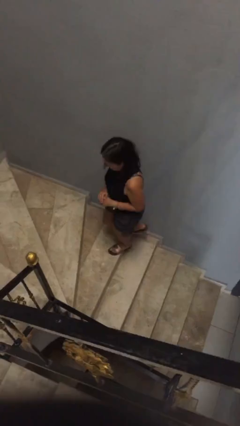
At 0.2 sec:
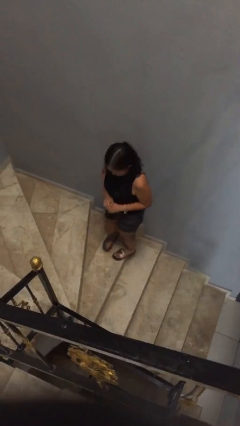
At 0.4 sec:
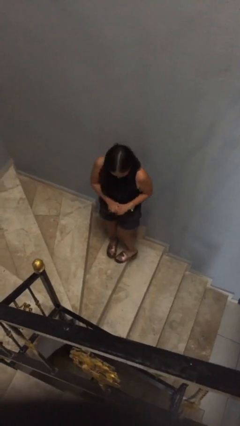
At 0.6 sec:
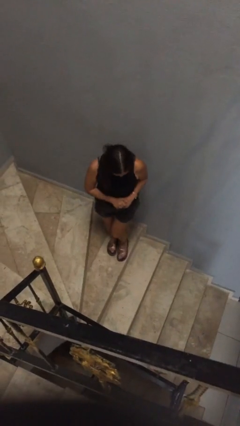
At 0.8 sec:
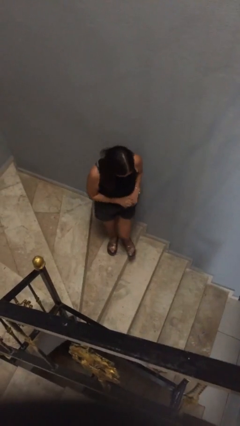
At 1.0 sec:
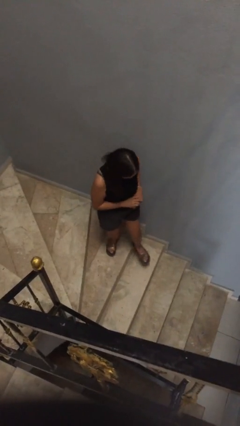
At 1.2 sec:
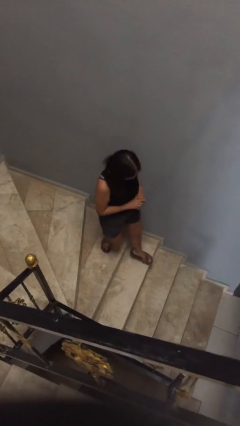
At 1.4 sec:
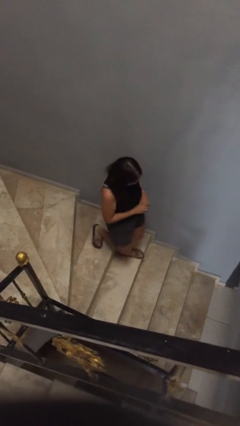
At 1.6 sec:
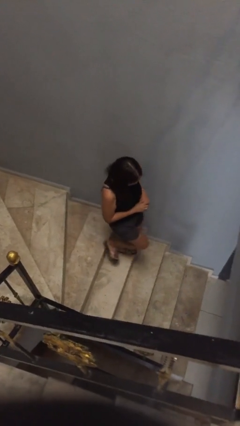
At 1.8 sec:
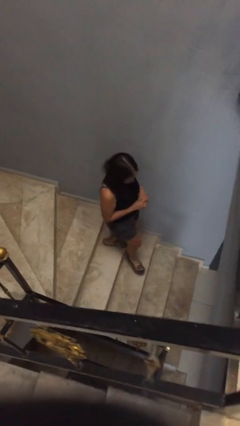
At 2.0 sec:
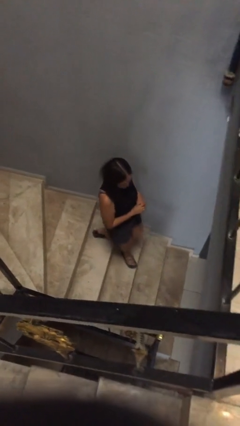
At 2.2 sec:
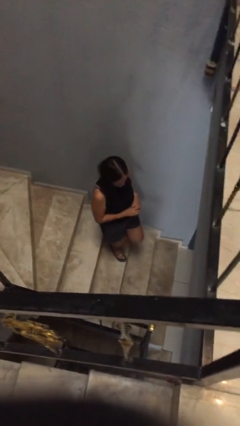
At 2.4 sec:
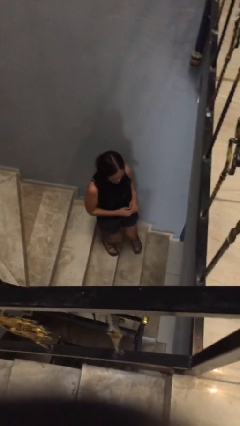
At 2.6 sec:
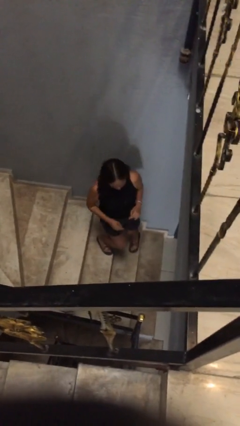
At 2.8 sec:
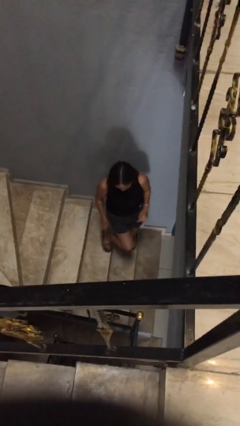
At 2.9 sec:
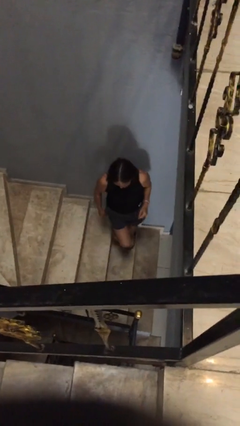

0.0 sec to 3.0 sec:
person climbs down stairs

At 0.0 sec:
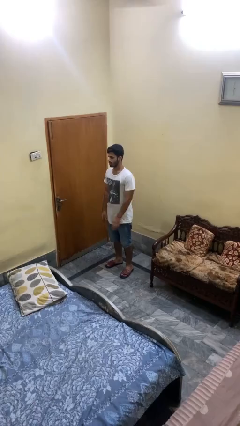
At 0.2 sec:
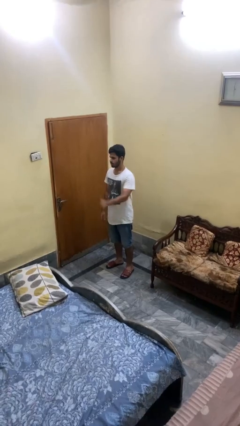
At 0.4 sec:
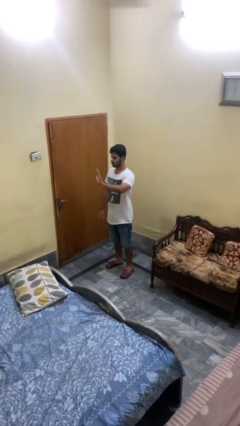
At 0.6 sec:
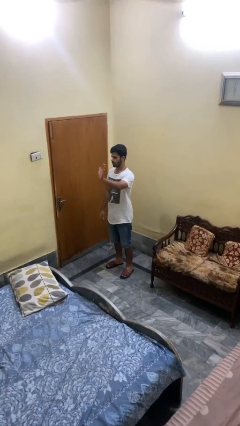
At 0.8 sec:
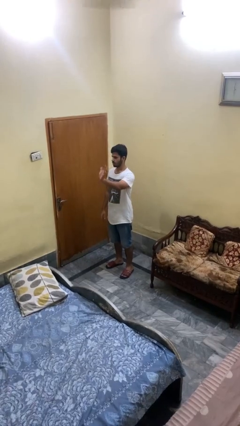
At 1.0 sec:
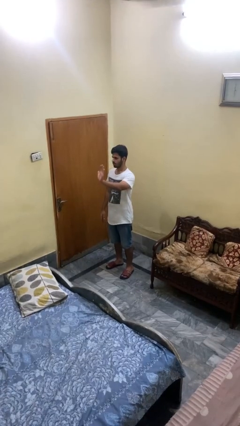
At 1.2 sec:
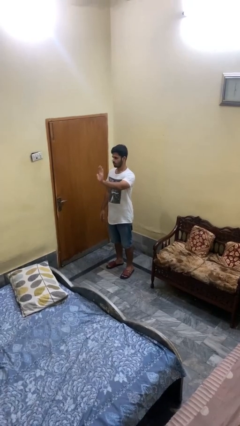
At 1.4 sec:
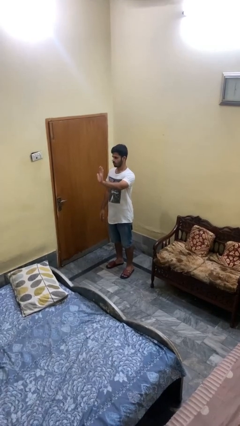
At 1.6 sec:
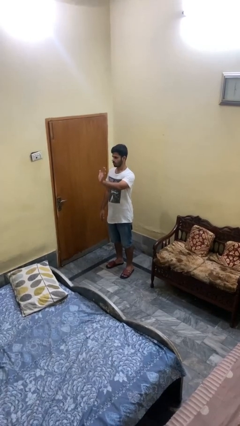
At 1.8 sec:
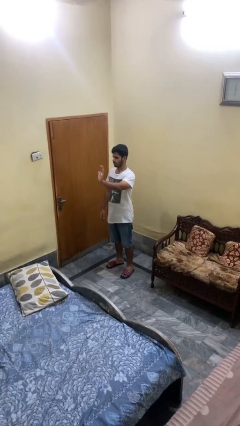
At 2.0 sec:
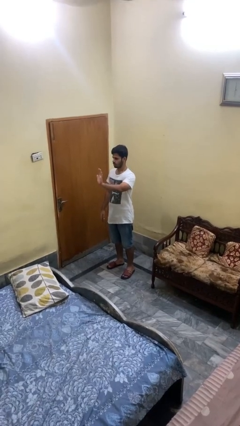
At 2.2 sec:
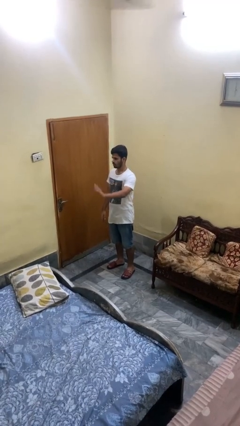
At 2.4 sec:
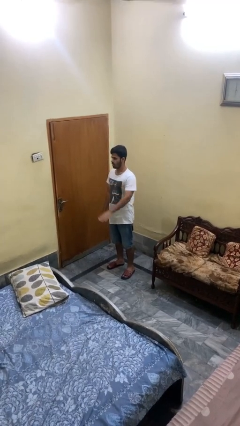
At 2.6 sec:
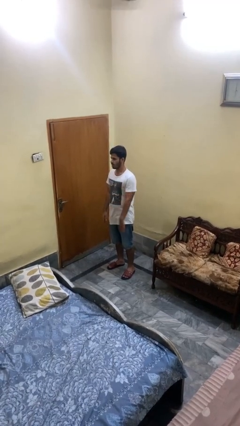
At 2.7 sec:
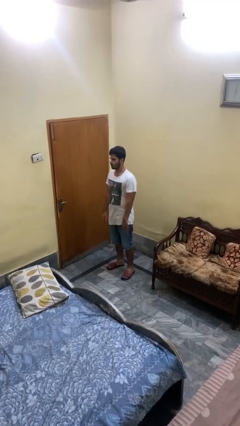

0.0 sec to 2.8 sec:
person waves at person

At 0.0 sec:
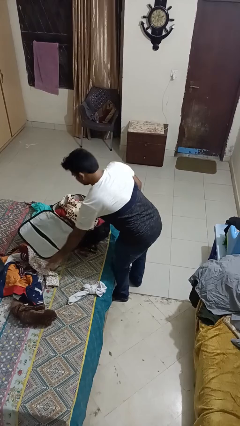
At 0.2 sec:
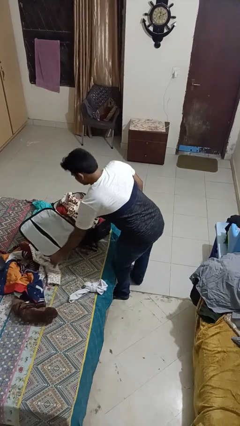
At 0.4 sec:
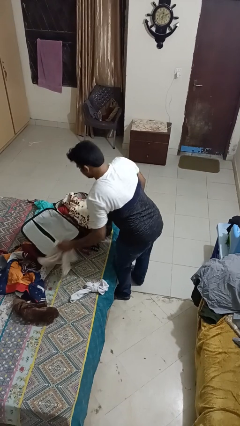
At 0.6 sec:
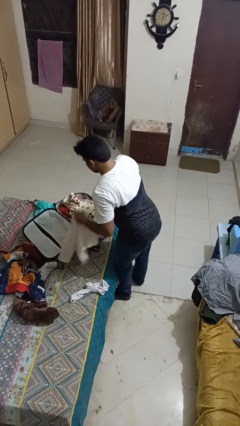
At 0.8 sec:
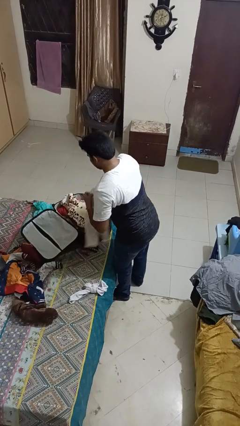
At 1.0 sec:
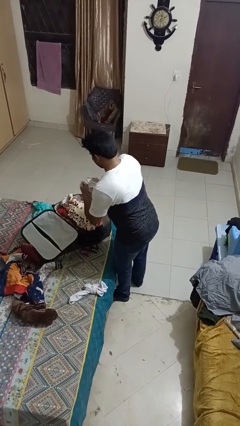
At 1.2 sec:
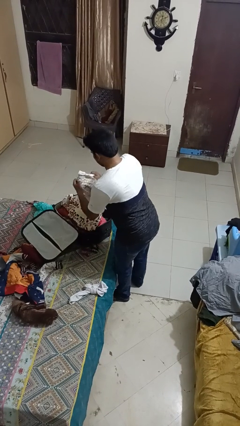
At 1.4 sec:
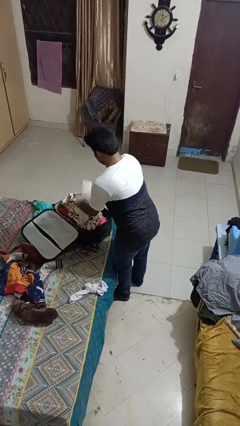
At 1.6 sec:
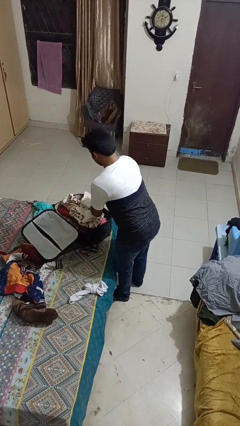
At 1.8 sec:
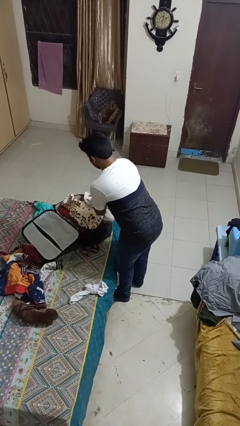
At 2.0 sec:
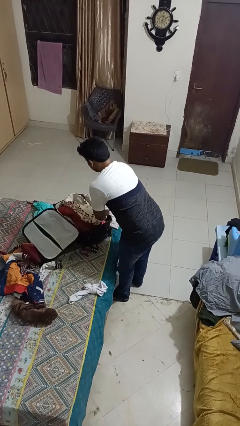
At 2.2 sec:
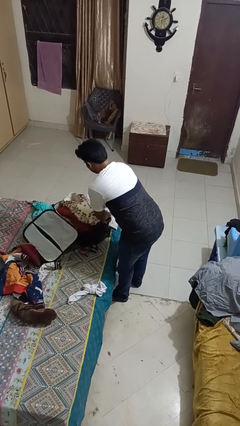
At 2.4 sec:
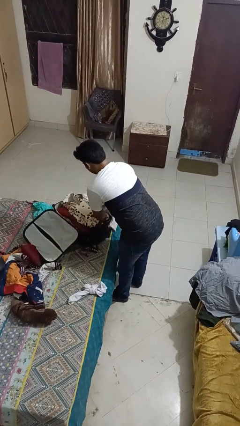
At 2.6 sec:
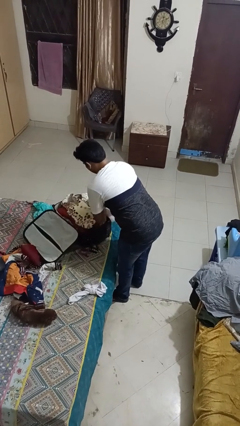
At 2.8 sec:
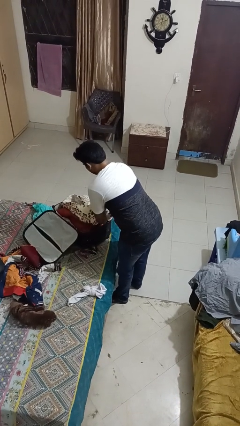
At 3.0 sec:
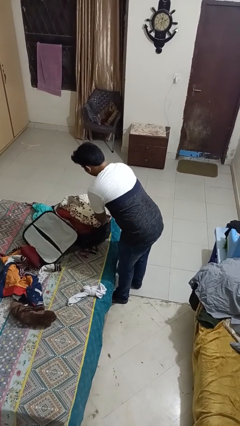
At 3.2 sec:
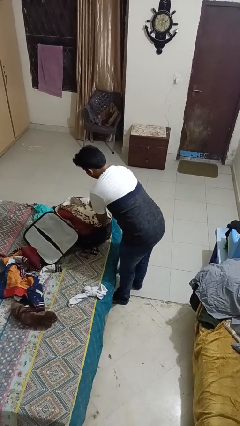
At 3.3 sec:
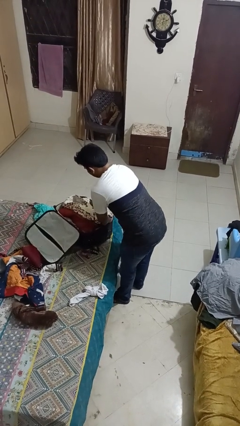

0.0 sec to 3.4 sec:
person loads clothes into suitcase

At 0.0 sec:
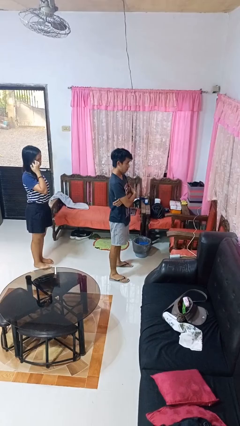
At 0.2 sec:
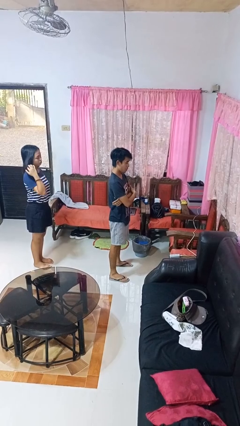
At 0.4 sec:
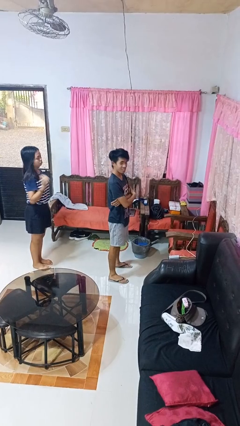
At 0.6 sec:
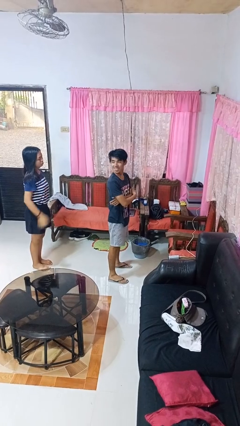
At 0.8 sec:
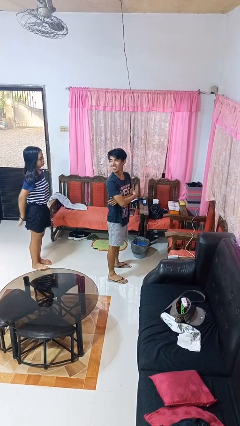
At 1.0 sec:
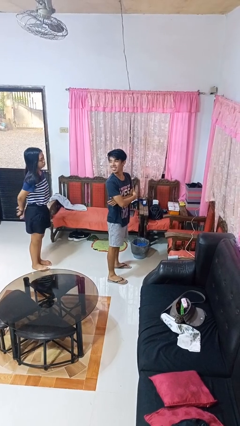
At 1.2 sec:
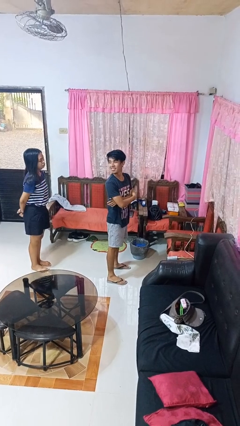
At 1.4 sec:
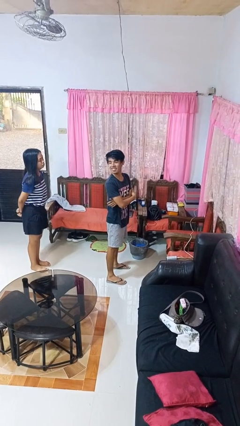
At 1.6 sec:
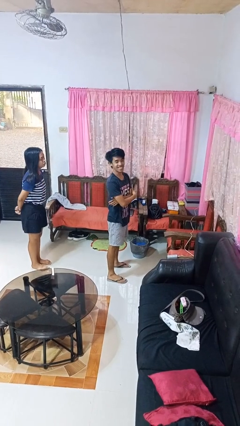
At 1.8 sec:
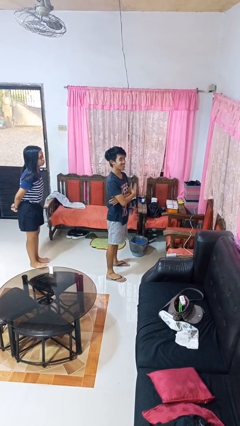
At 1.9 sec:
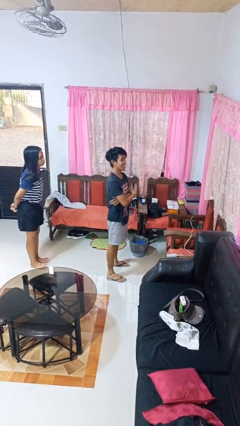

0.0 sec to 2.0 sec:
person looks over shoulder

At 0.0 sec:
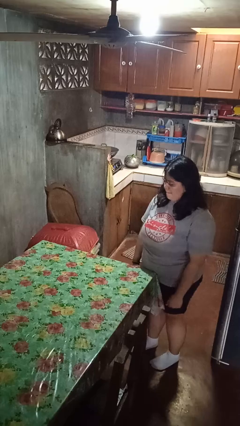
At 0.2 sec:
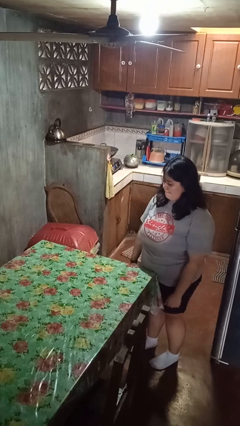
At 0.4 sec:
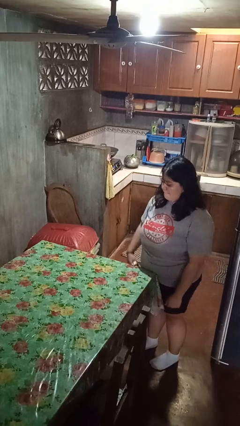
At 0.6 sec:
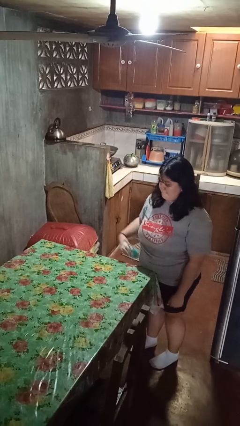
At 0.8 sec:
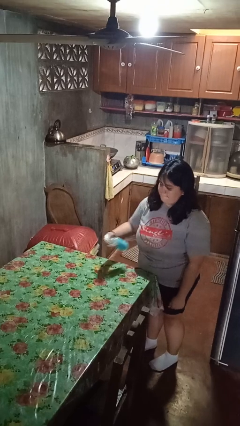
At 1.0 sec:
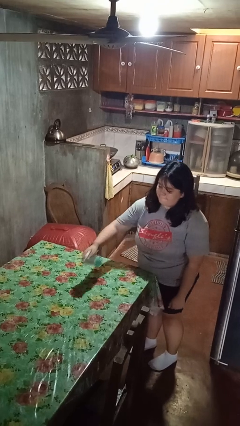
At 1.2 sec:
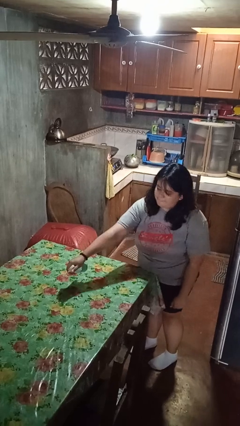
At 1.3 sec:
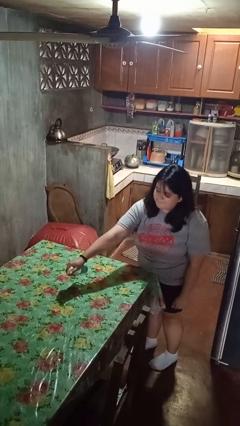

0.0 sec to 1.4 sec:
person sprays from bottle

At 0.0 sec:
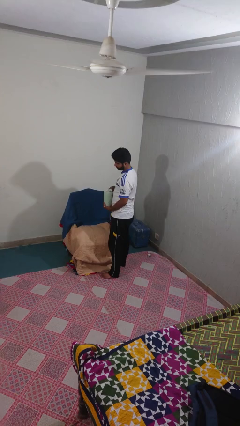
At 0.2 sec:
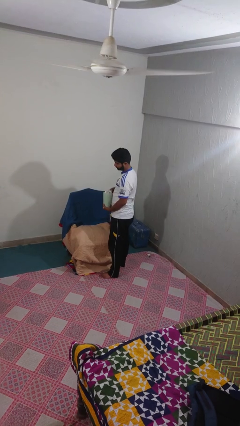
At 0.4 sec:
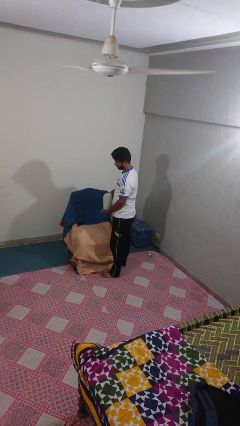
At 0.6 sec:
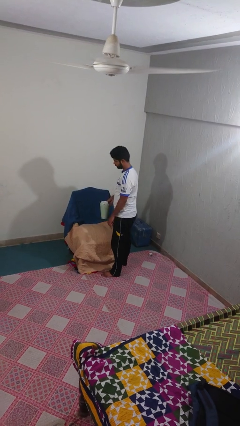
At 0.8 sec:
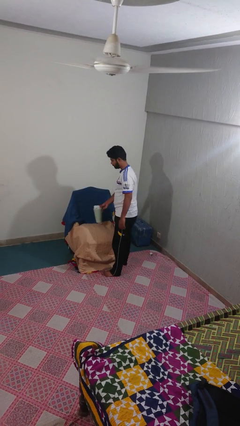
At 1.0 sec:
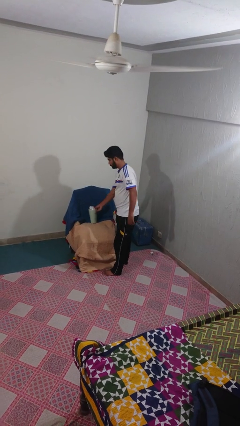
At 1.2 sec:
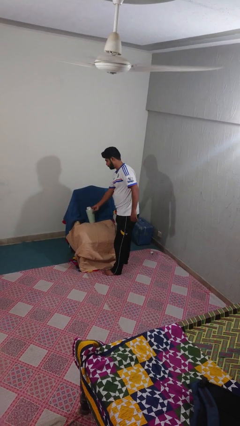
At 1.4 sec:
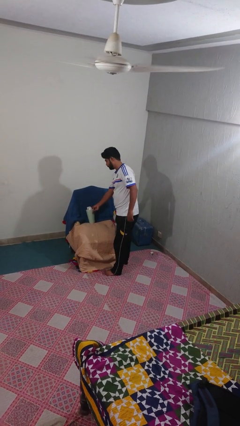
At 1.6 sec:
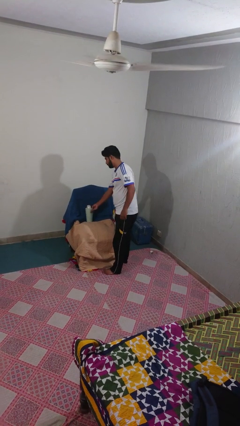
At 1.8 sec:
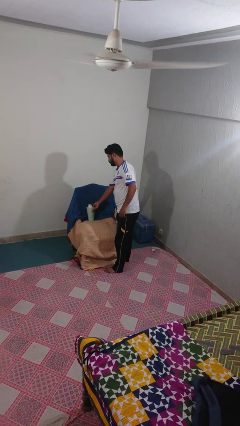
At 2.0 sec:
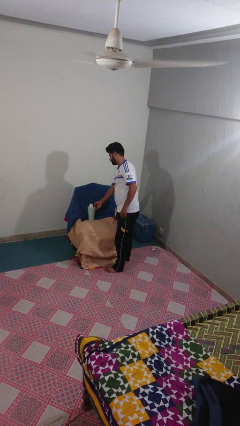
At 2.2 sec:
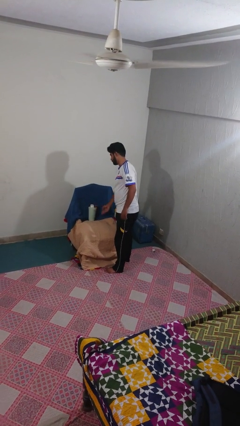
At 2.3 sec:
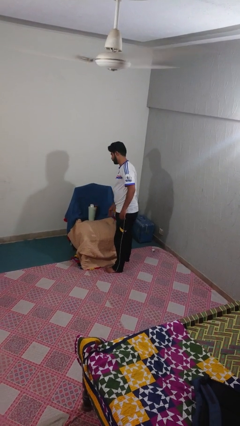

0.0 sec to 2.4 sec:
person puts down object on couch

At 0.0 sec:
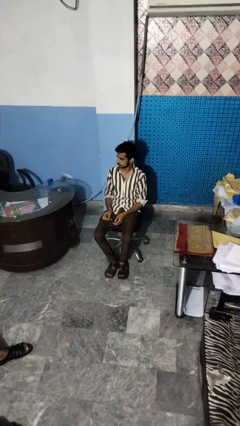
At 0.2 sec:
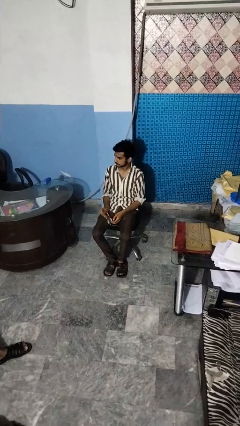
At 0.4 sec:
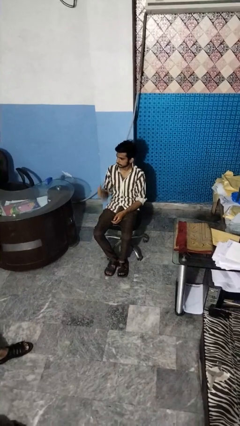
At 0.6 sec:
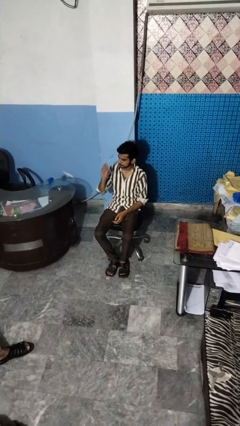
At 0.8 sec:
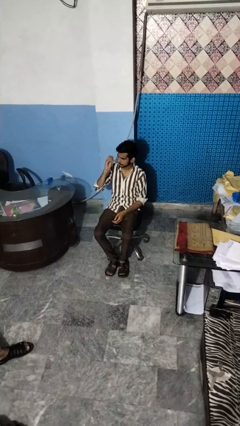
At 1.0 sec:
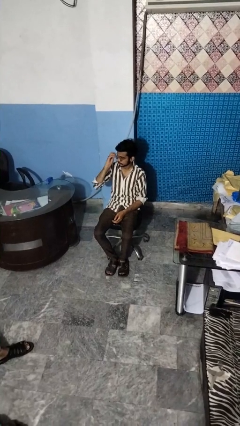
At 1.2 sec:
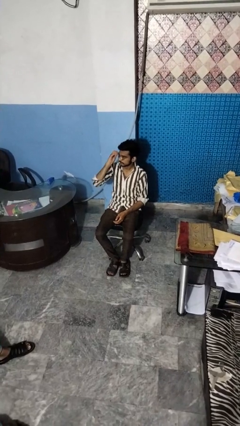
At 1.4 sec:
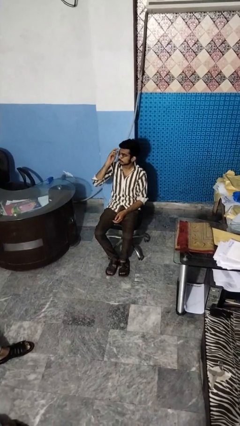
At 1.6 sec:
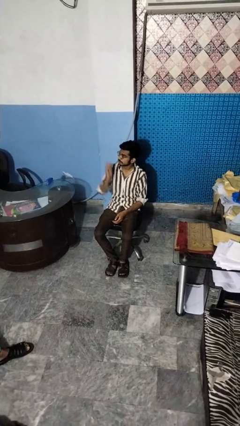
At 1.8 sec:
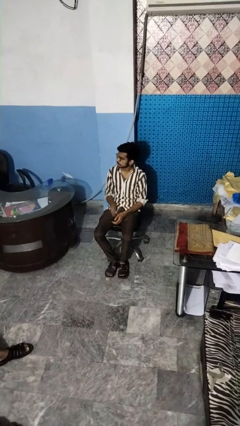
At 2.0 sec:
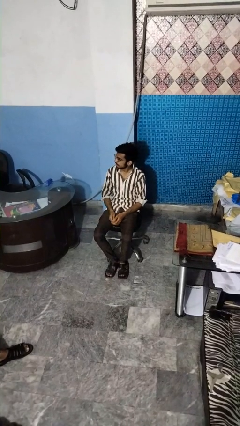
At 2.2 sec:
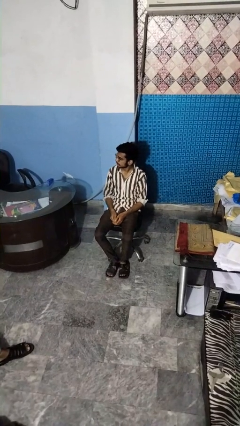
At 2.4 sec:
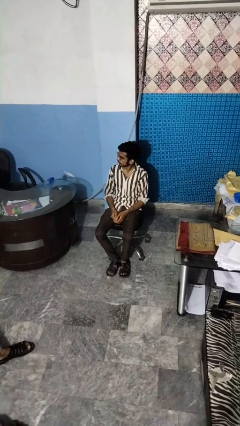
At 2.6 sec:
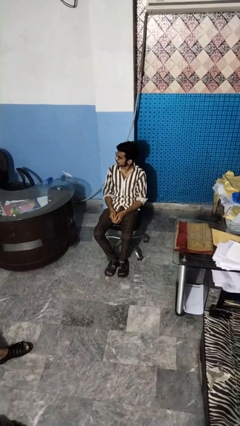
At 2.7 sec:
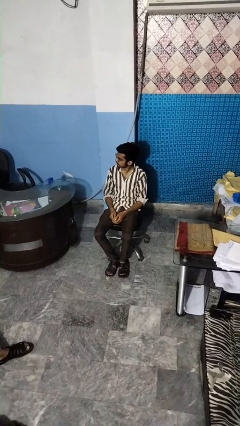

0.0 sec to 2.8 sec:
person puts on glasses
